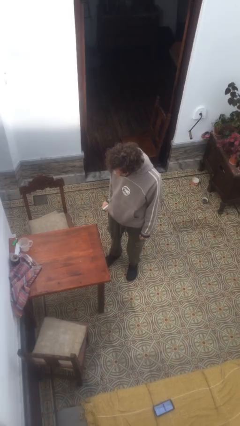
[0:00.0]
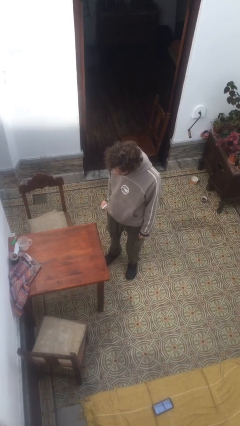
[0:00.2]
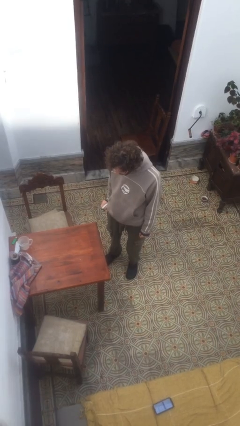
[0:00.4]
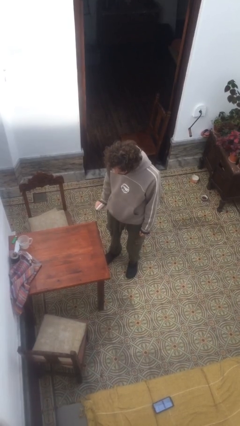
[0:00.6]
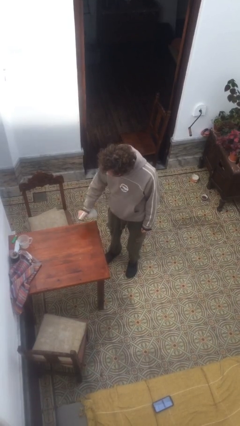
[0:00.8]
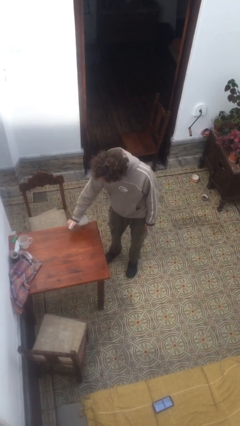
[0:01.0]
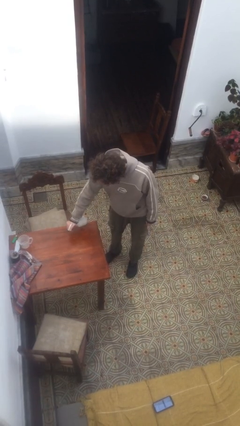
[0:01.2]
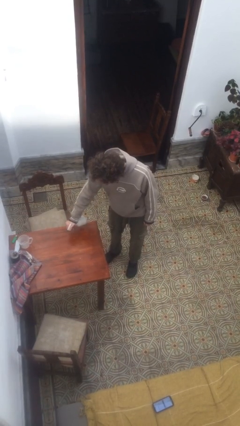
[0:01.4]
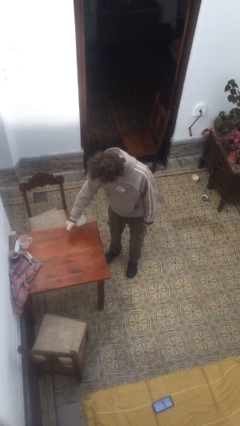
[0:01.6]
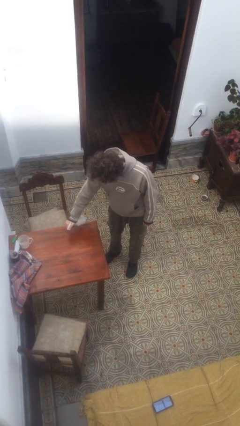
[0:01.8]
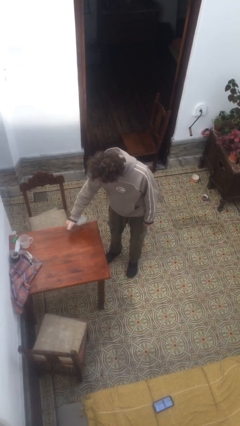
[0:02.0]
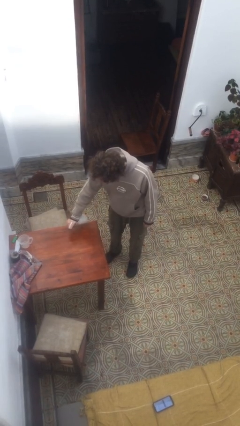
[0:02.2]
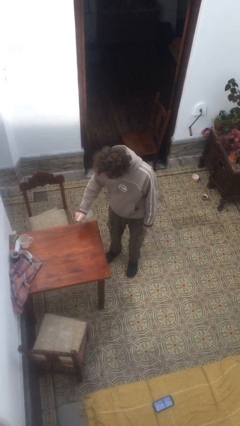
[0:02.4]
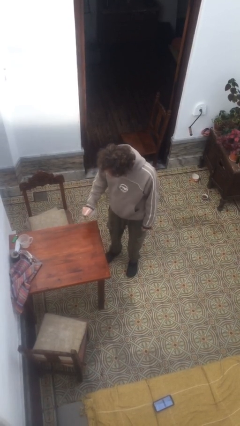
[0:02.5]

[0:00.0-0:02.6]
person sprays from bottle

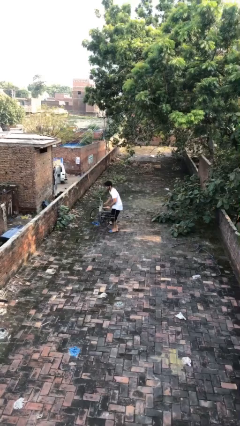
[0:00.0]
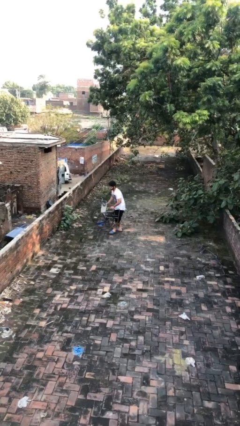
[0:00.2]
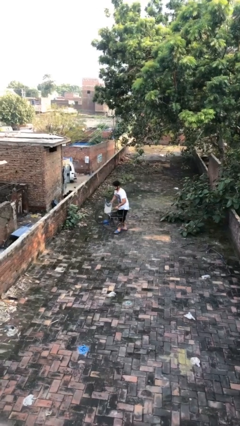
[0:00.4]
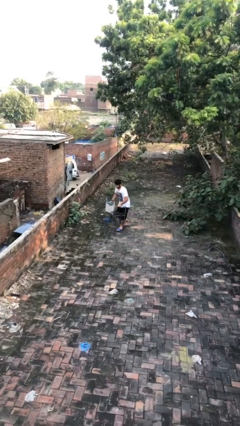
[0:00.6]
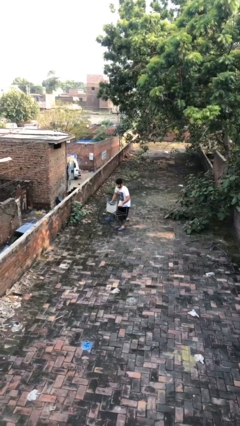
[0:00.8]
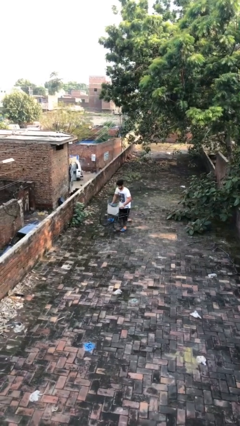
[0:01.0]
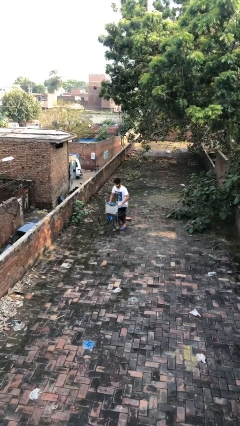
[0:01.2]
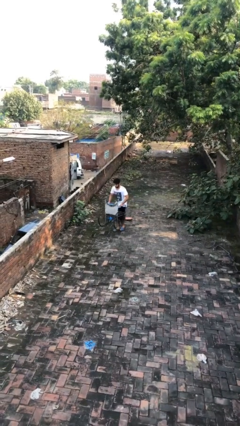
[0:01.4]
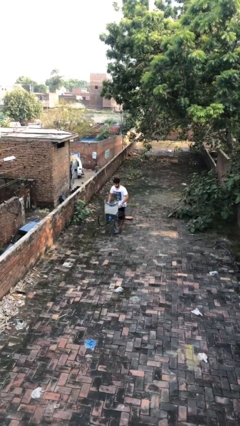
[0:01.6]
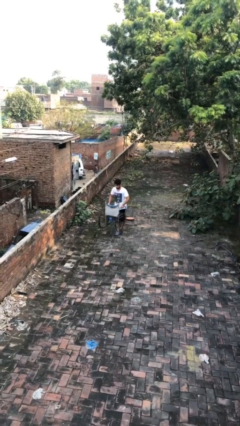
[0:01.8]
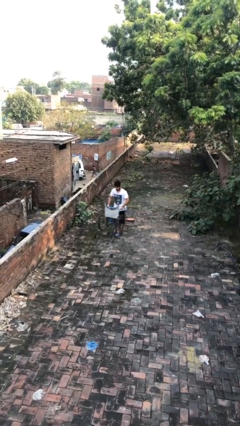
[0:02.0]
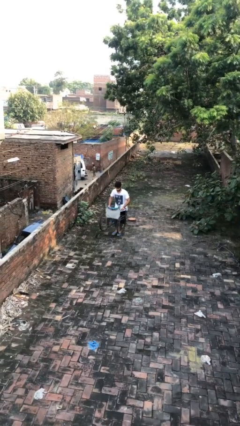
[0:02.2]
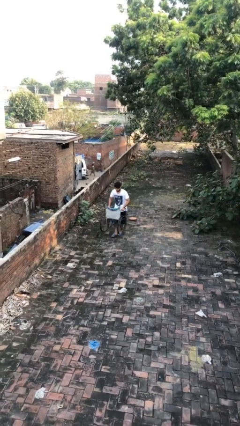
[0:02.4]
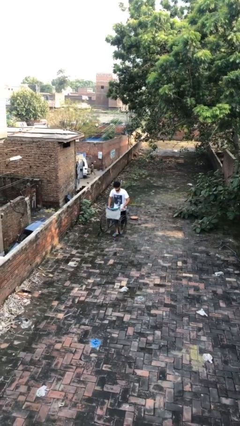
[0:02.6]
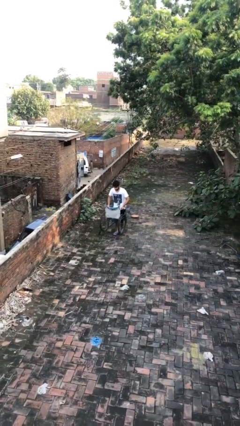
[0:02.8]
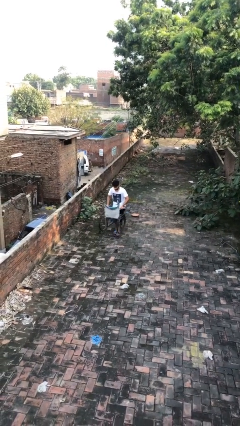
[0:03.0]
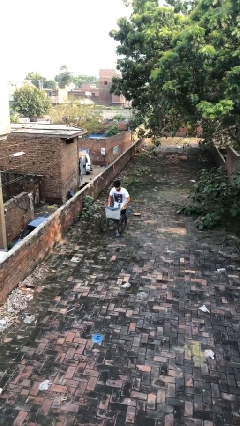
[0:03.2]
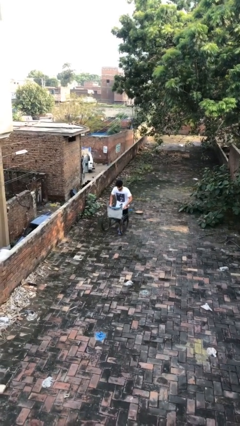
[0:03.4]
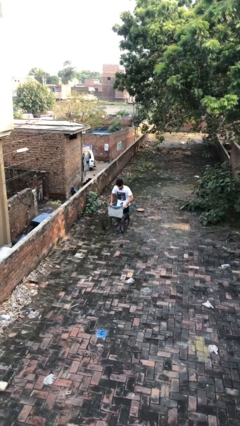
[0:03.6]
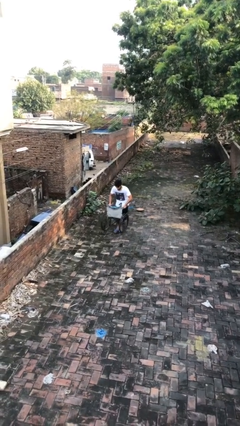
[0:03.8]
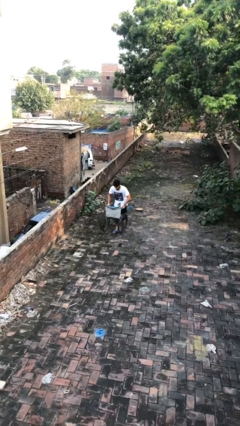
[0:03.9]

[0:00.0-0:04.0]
person carries heavy object

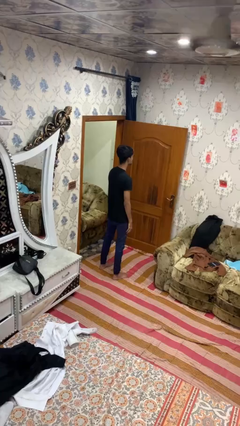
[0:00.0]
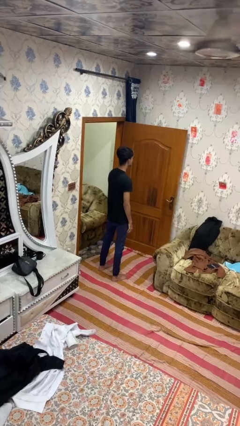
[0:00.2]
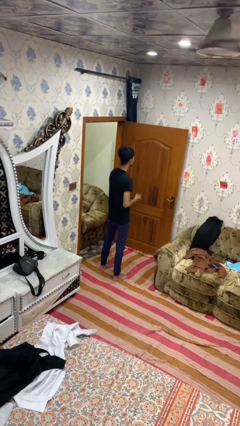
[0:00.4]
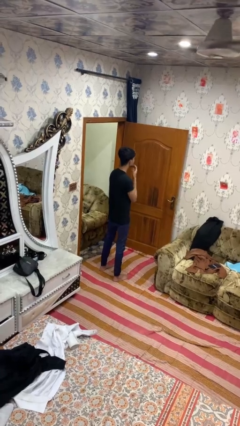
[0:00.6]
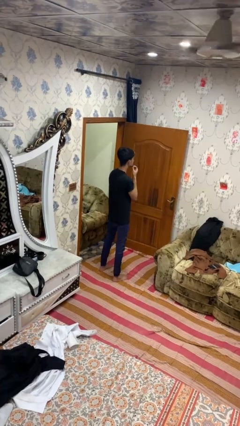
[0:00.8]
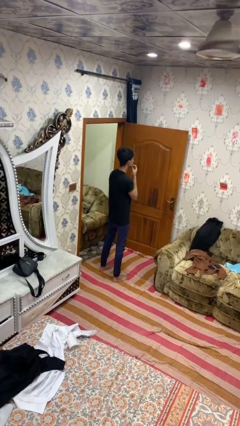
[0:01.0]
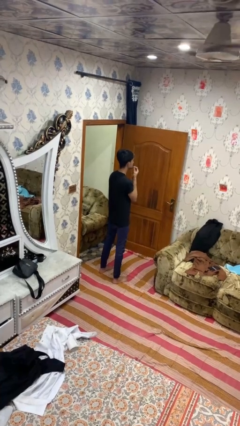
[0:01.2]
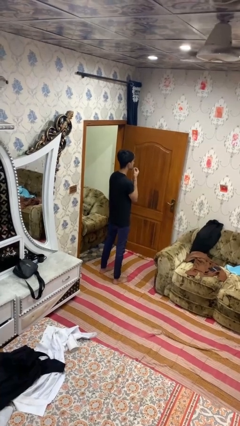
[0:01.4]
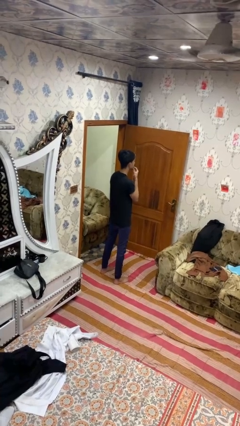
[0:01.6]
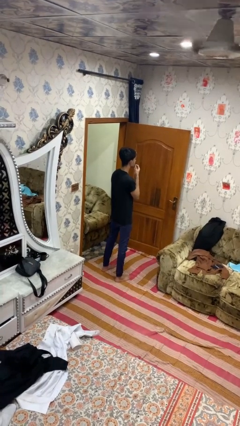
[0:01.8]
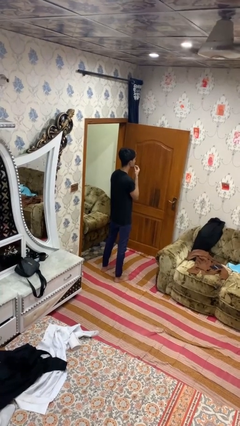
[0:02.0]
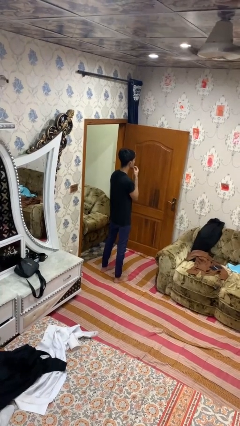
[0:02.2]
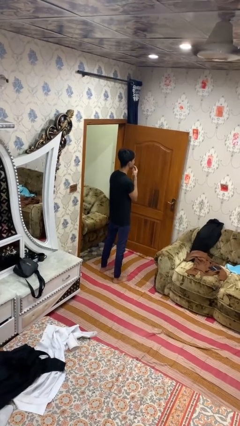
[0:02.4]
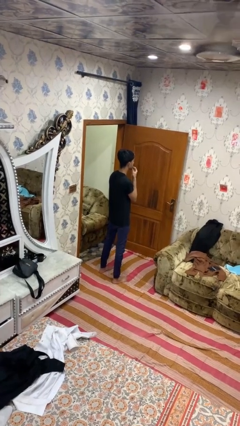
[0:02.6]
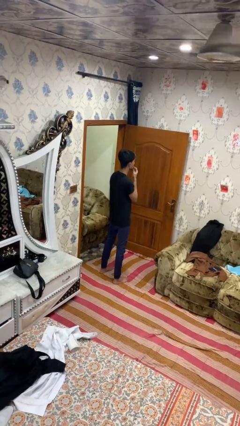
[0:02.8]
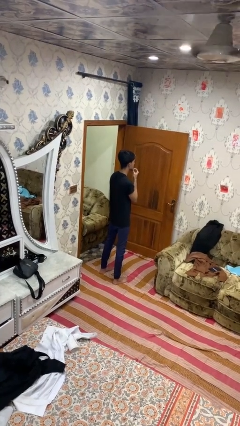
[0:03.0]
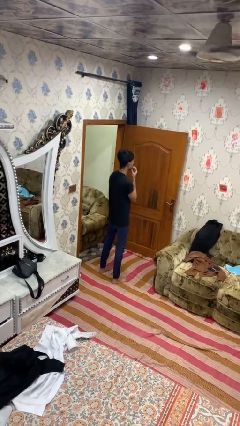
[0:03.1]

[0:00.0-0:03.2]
person strokes chin

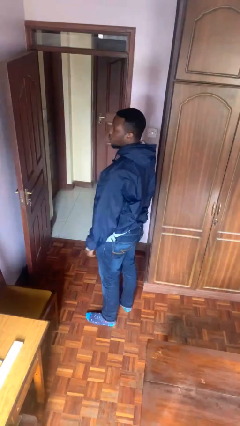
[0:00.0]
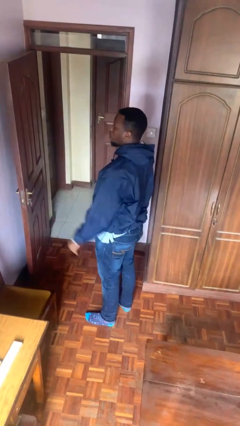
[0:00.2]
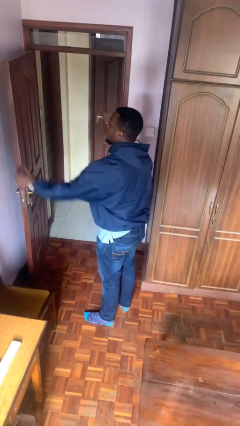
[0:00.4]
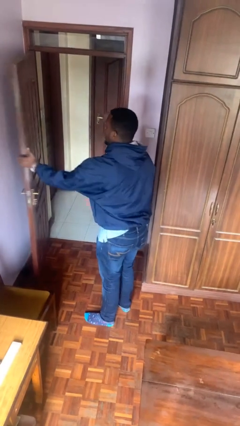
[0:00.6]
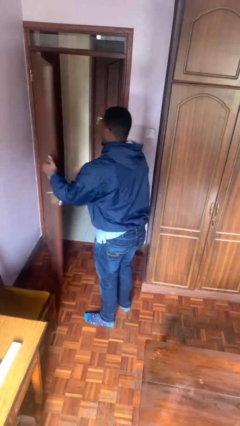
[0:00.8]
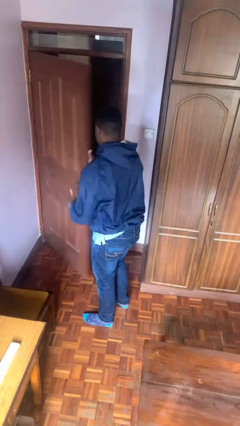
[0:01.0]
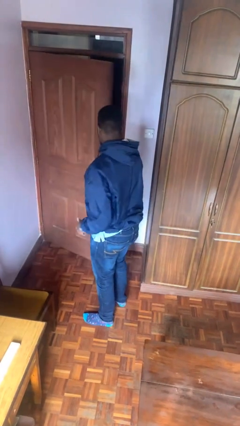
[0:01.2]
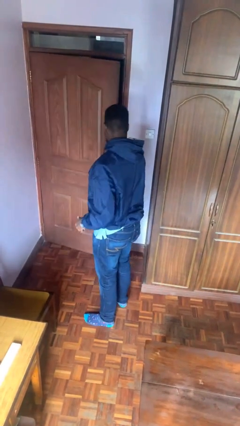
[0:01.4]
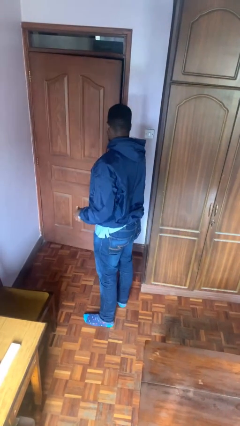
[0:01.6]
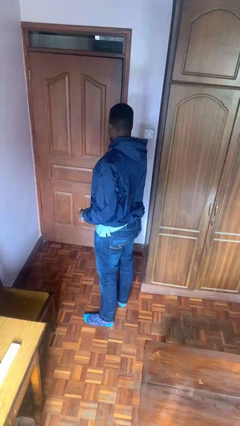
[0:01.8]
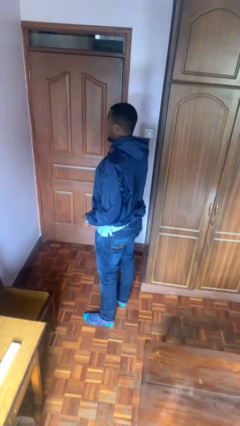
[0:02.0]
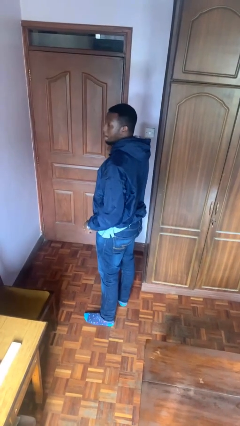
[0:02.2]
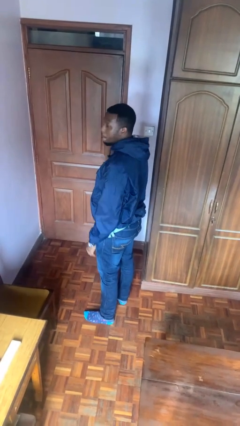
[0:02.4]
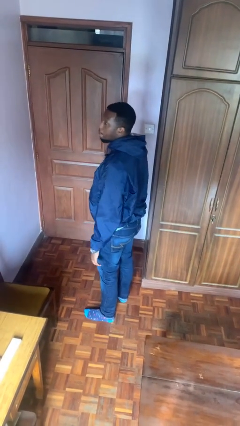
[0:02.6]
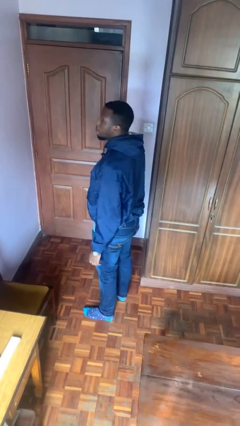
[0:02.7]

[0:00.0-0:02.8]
person closes facility door

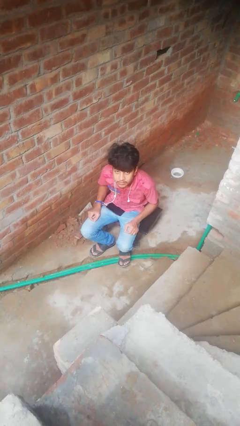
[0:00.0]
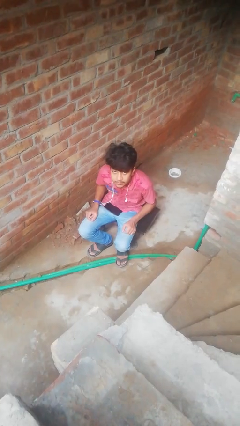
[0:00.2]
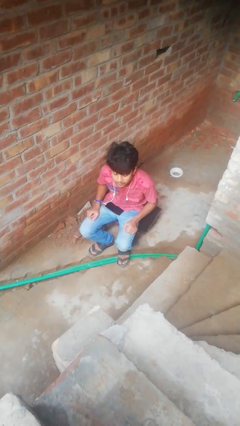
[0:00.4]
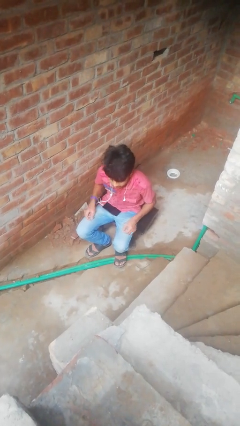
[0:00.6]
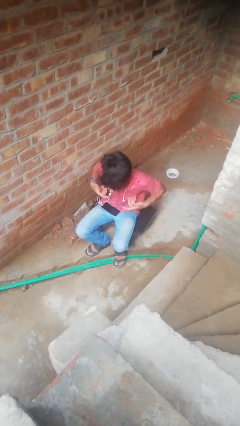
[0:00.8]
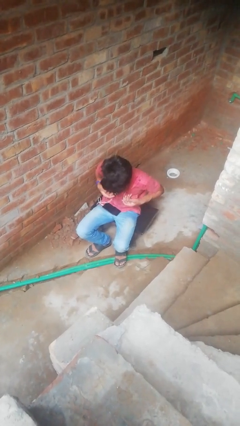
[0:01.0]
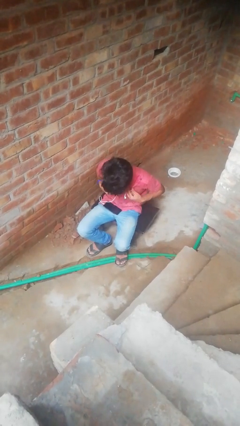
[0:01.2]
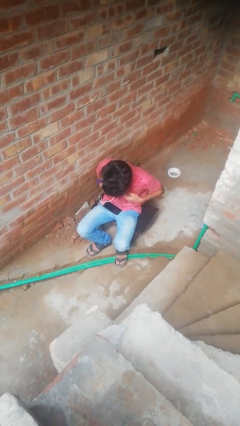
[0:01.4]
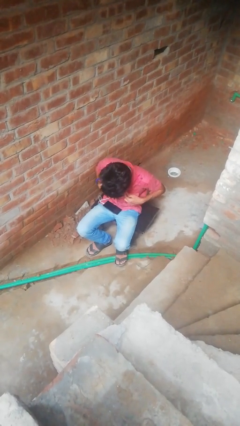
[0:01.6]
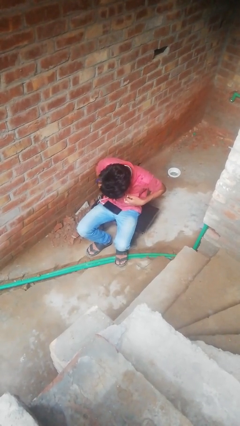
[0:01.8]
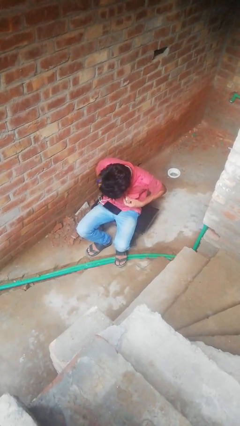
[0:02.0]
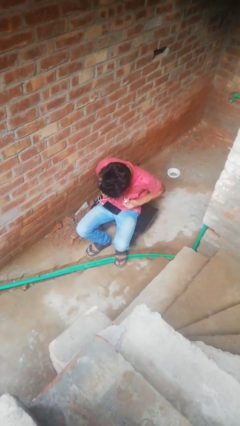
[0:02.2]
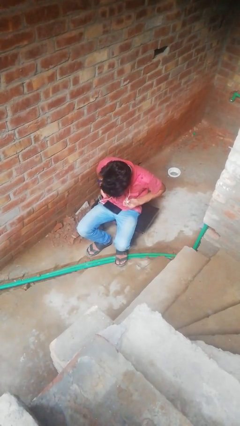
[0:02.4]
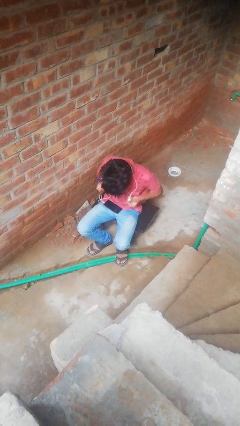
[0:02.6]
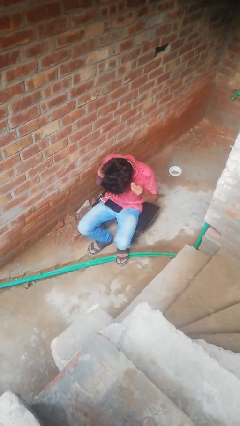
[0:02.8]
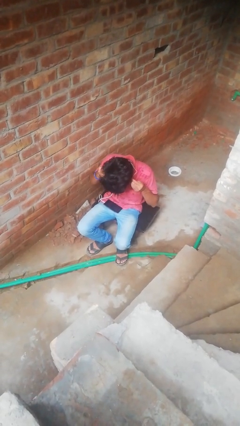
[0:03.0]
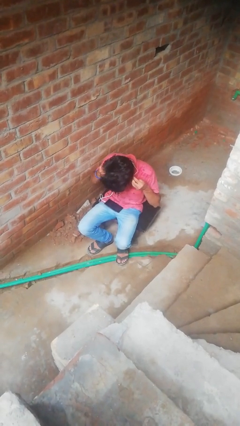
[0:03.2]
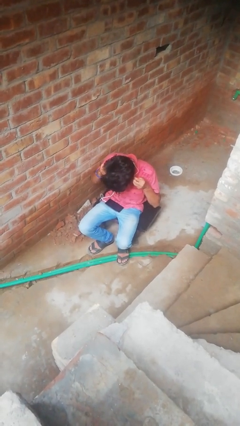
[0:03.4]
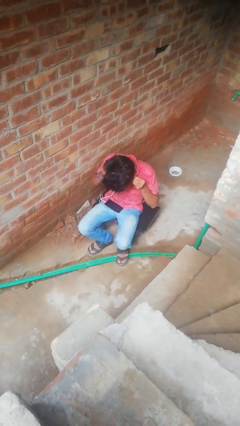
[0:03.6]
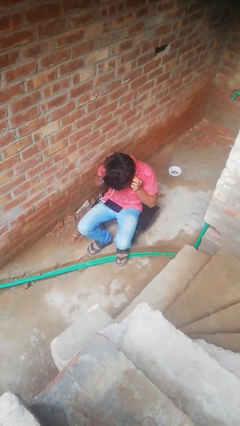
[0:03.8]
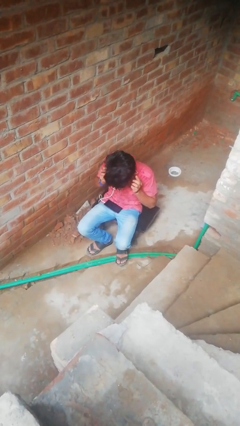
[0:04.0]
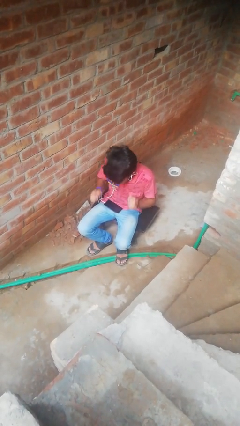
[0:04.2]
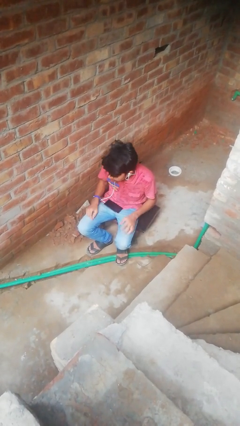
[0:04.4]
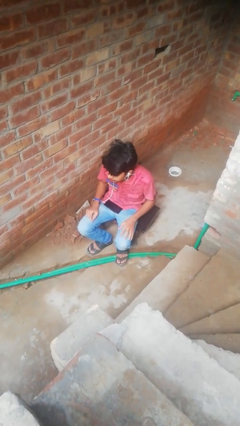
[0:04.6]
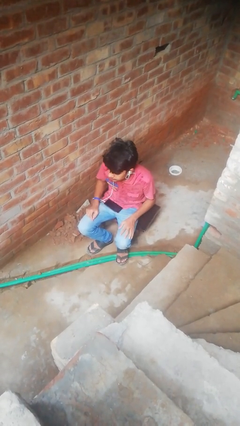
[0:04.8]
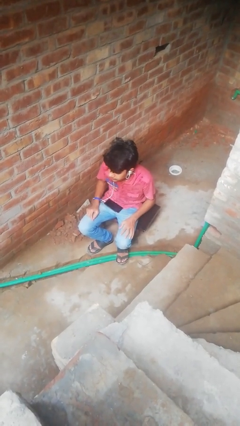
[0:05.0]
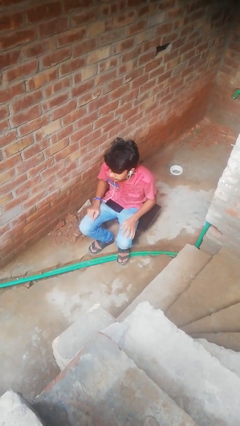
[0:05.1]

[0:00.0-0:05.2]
person puts on headphones
